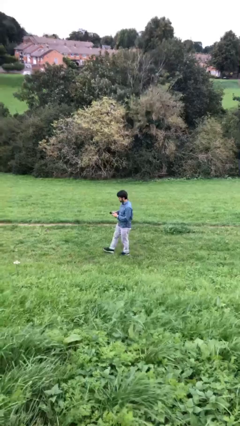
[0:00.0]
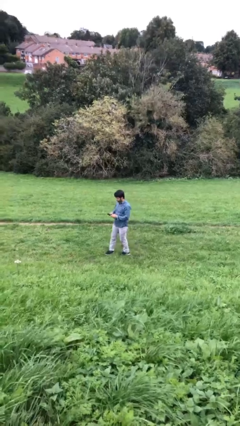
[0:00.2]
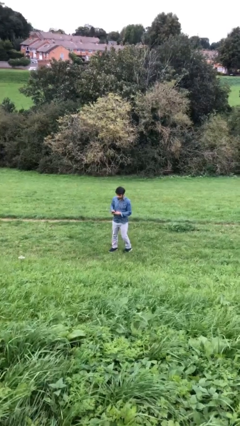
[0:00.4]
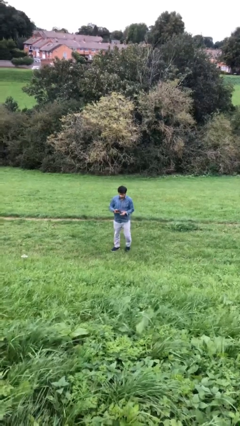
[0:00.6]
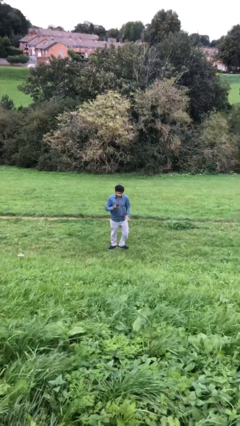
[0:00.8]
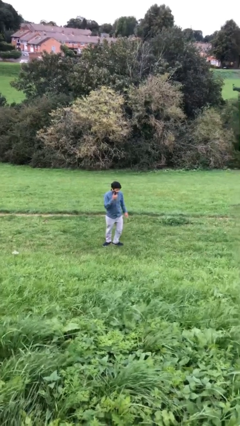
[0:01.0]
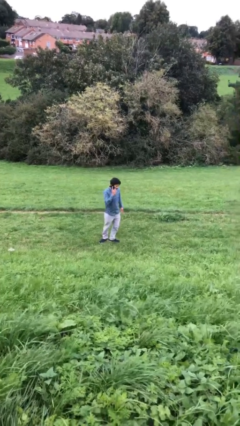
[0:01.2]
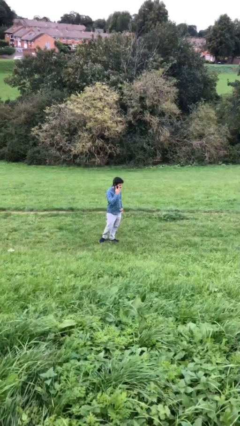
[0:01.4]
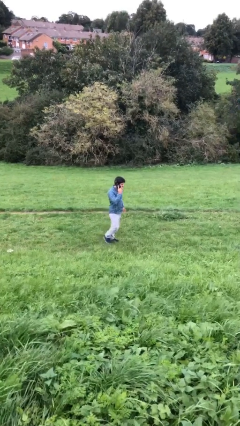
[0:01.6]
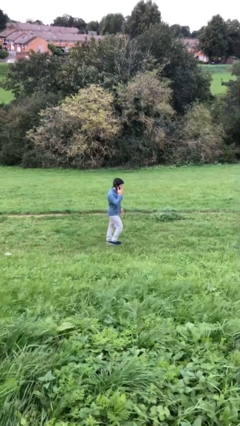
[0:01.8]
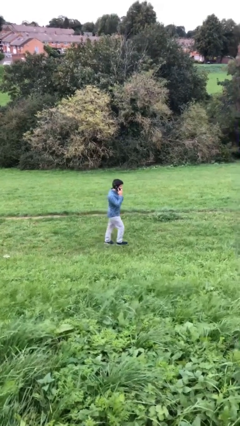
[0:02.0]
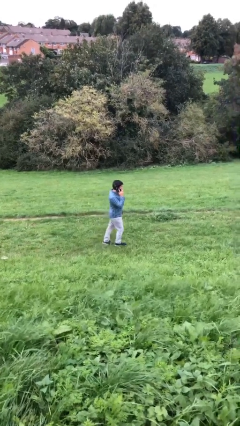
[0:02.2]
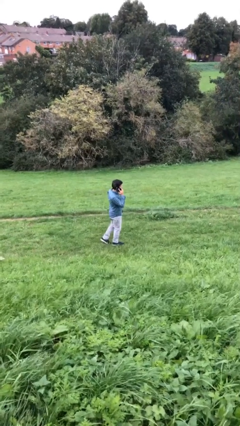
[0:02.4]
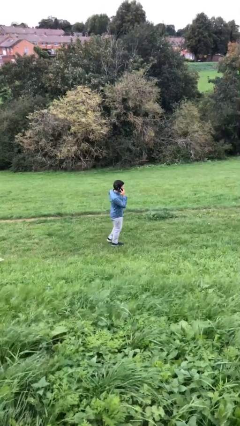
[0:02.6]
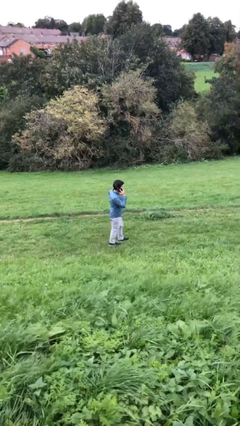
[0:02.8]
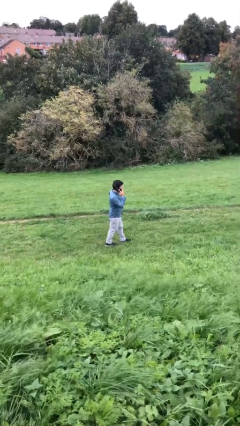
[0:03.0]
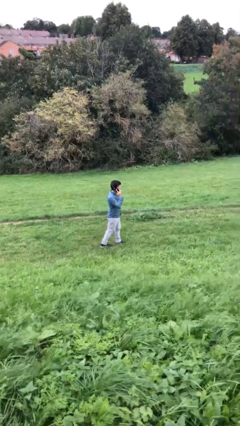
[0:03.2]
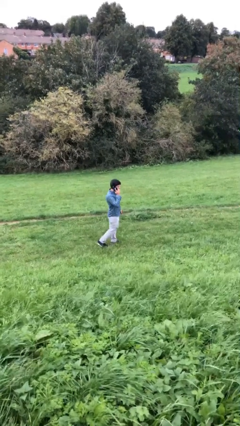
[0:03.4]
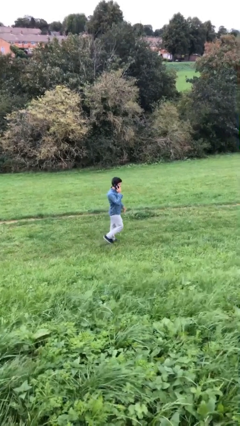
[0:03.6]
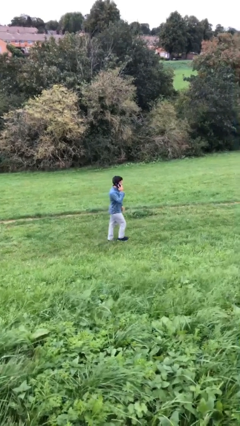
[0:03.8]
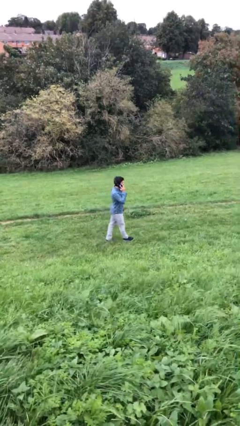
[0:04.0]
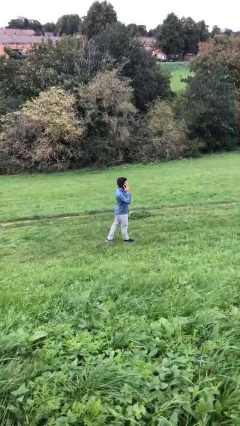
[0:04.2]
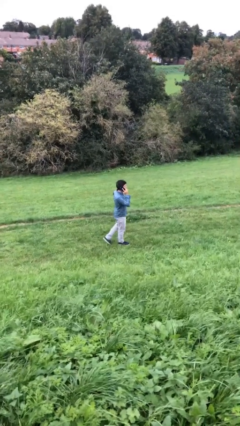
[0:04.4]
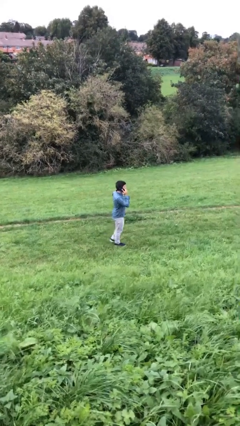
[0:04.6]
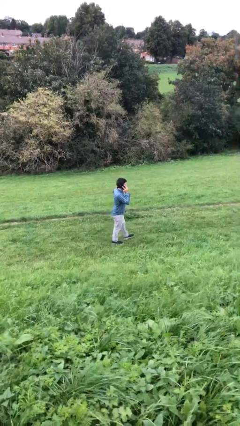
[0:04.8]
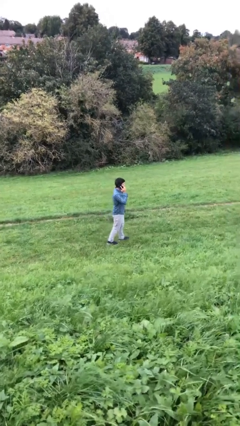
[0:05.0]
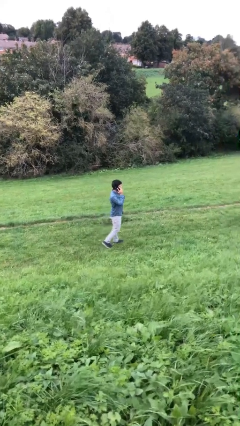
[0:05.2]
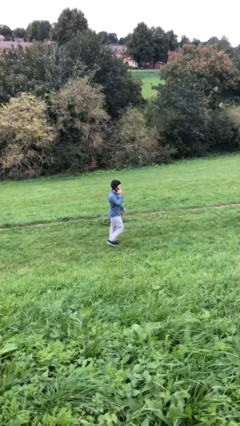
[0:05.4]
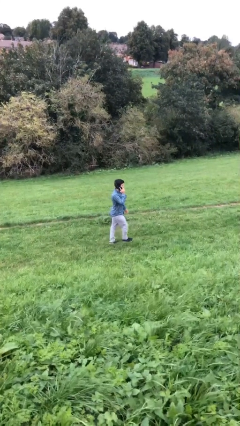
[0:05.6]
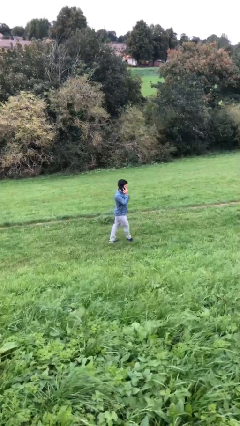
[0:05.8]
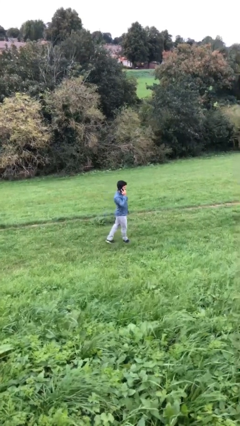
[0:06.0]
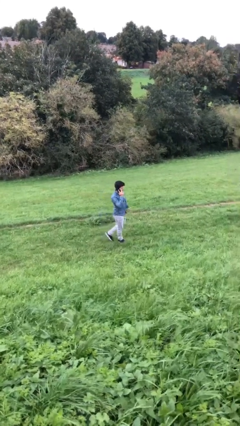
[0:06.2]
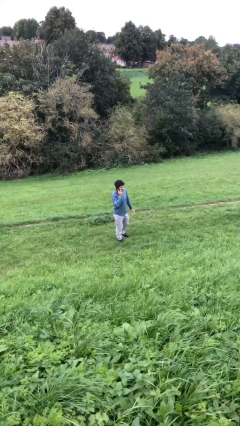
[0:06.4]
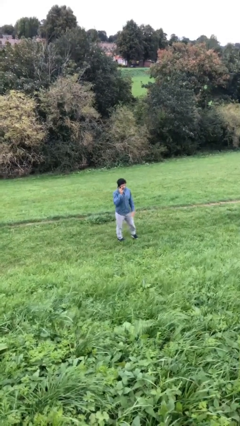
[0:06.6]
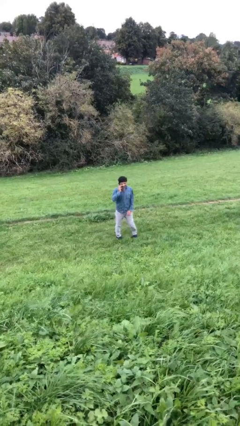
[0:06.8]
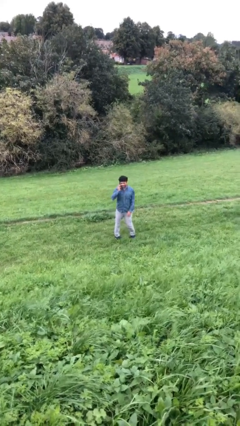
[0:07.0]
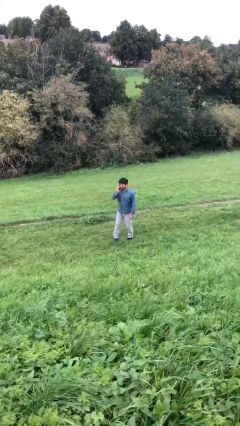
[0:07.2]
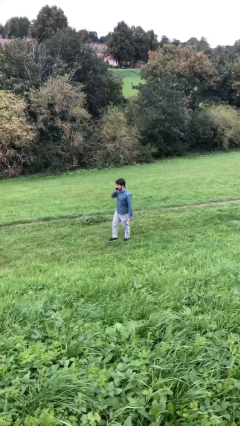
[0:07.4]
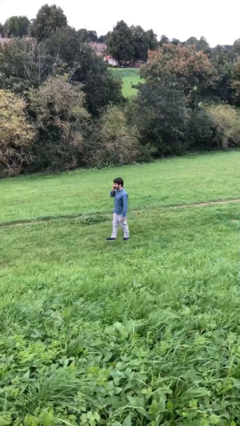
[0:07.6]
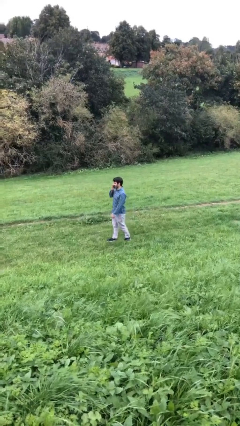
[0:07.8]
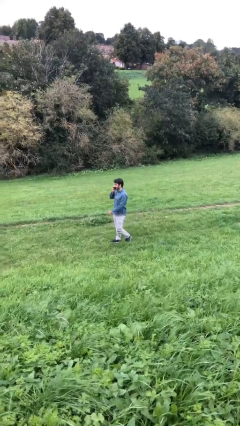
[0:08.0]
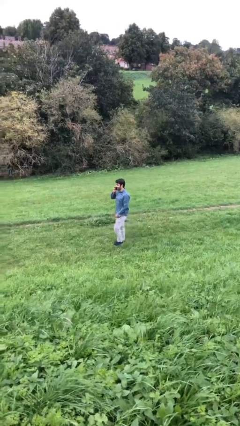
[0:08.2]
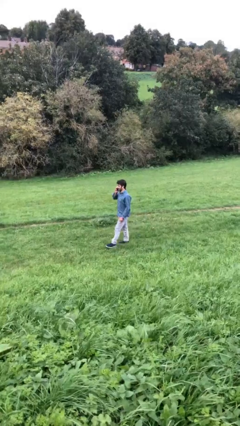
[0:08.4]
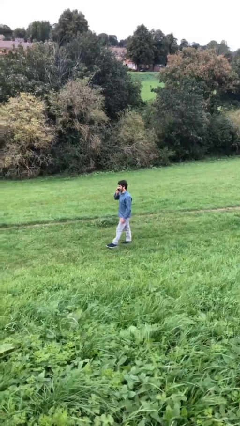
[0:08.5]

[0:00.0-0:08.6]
person talks on phone

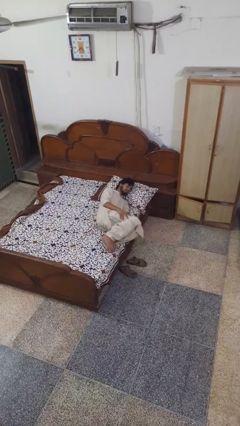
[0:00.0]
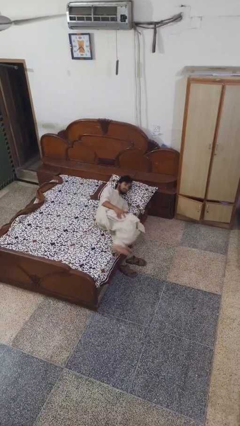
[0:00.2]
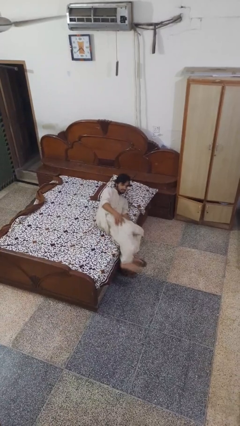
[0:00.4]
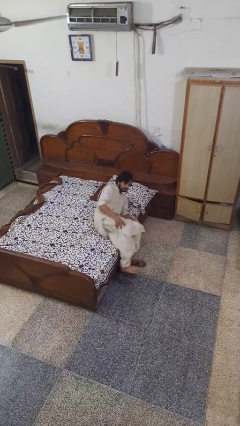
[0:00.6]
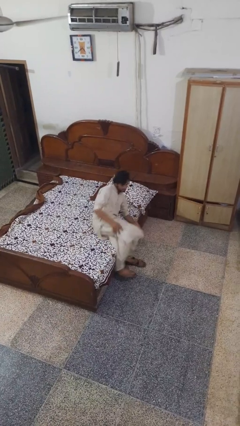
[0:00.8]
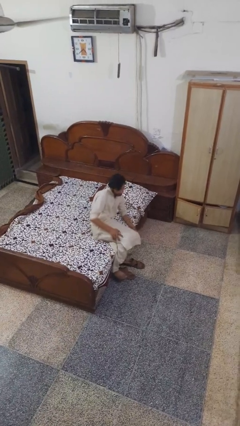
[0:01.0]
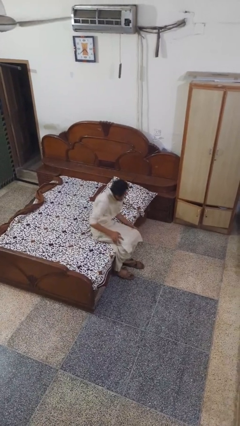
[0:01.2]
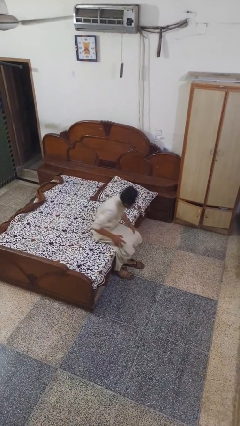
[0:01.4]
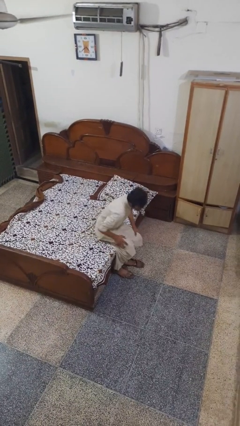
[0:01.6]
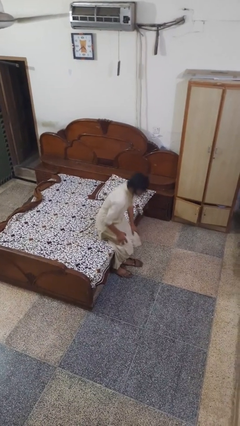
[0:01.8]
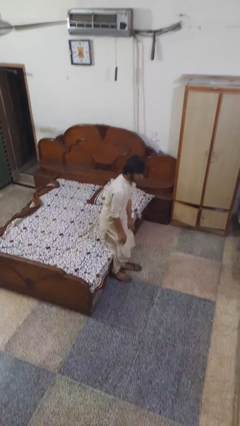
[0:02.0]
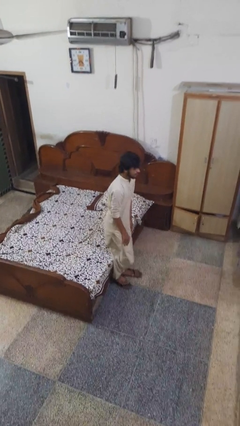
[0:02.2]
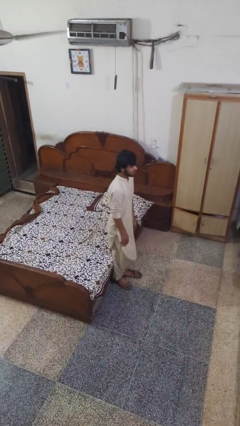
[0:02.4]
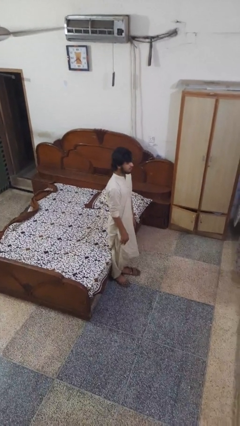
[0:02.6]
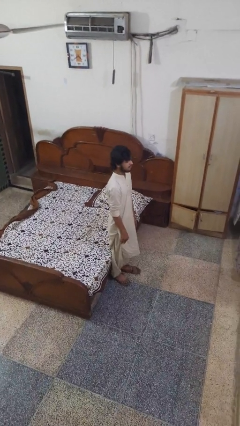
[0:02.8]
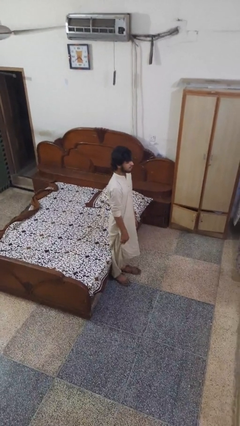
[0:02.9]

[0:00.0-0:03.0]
person stands up

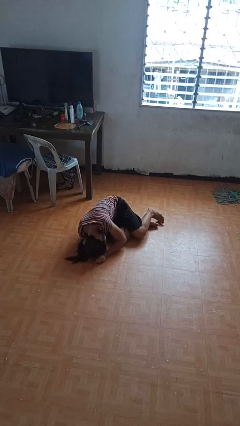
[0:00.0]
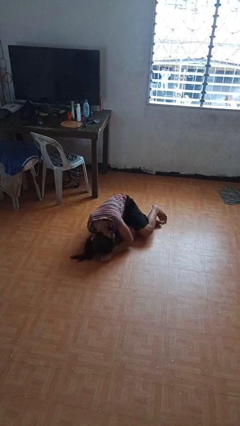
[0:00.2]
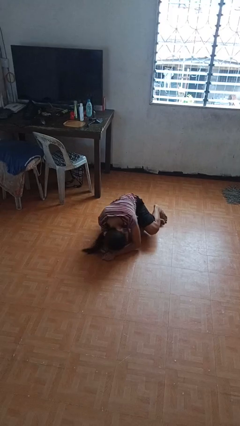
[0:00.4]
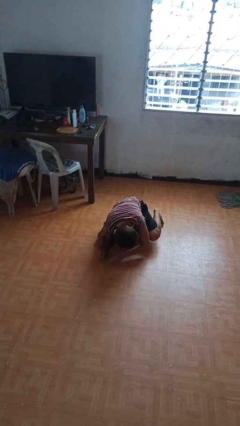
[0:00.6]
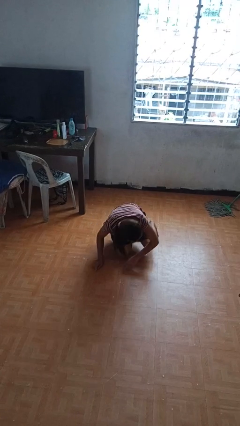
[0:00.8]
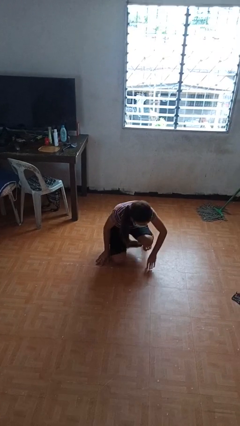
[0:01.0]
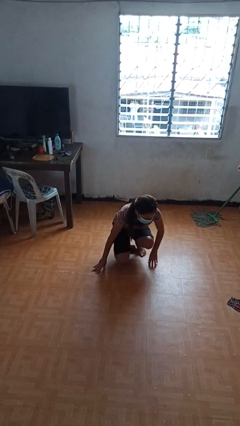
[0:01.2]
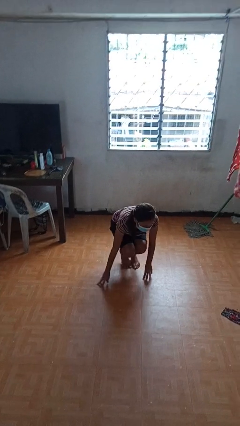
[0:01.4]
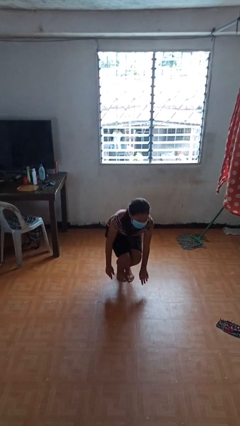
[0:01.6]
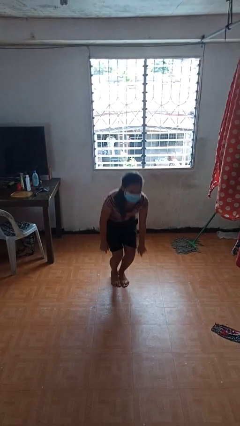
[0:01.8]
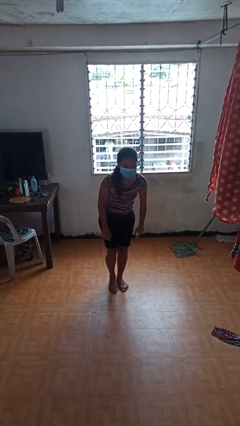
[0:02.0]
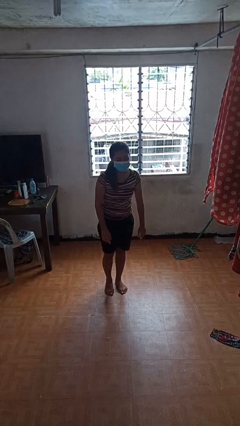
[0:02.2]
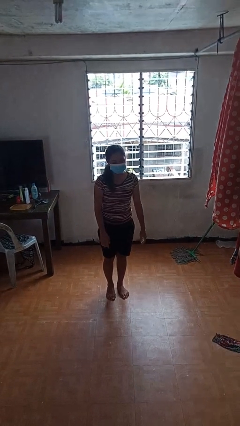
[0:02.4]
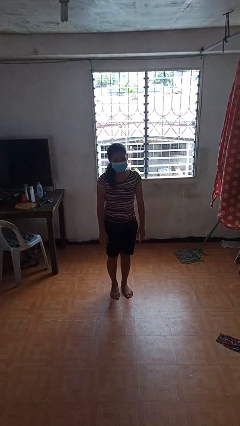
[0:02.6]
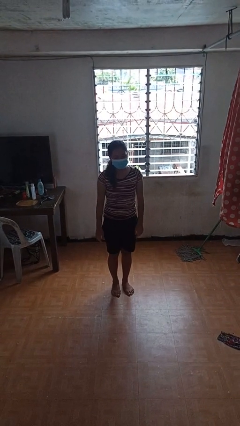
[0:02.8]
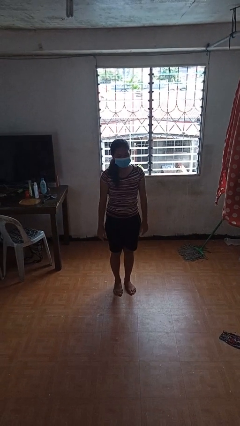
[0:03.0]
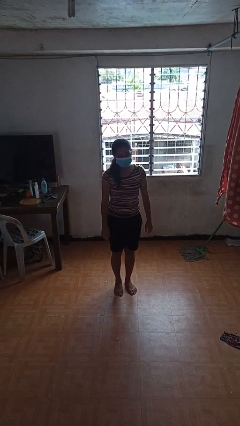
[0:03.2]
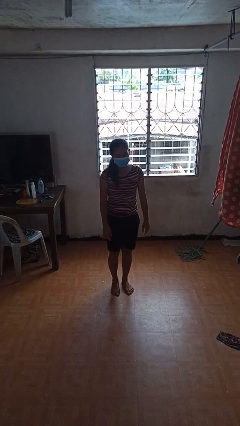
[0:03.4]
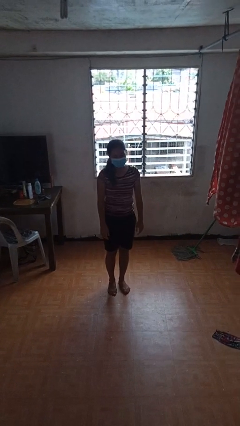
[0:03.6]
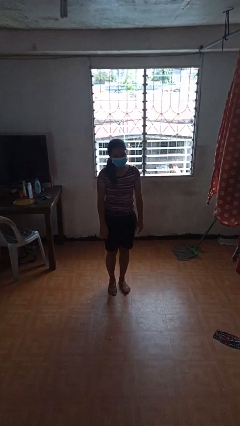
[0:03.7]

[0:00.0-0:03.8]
person stands up from floor

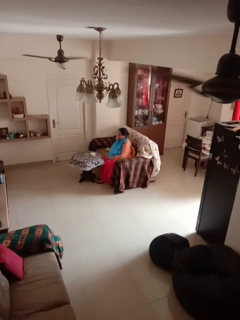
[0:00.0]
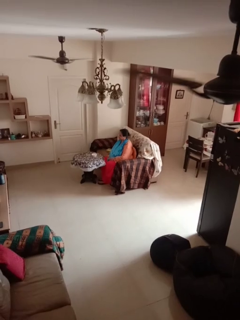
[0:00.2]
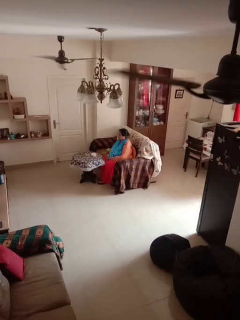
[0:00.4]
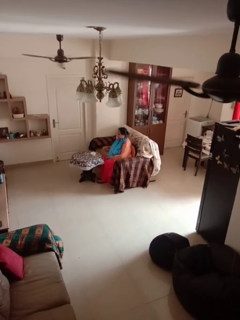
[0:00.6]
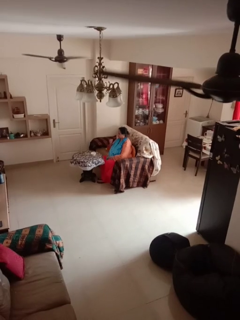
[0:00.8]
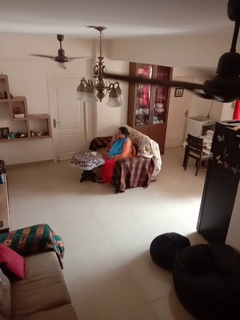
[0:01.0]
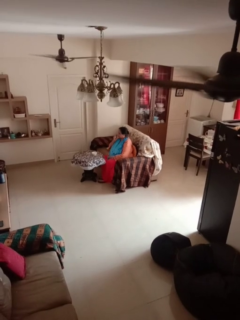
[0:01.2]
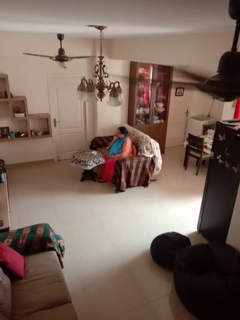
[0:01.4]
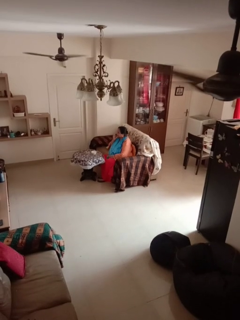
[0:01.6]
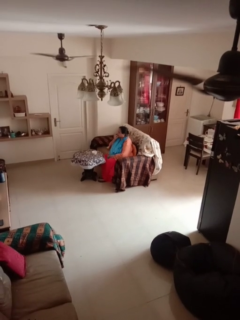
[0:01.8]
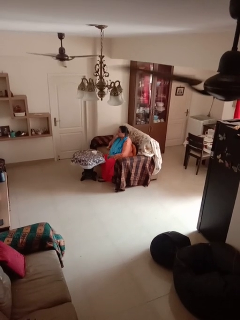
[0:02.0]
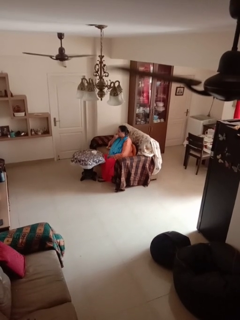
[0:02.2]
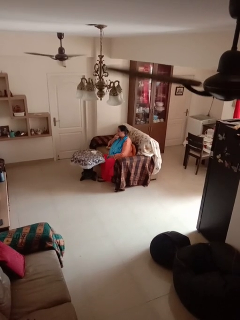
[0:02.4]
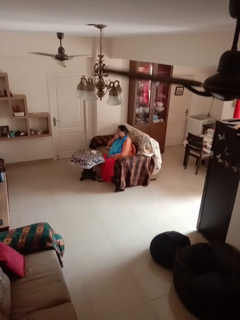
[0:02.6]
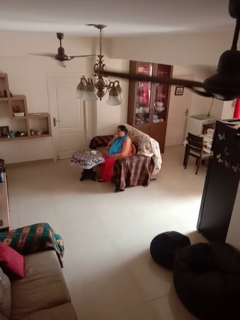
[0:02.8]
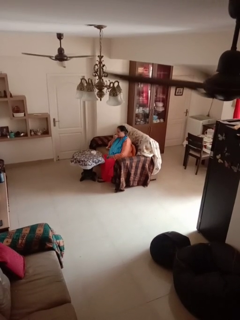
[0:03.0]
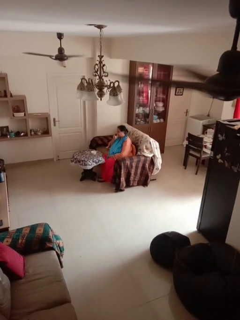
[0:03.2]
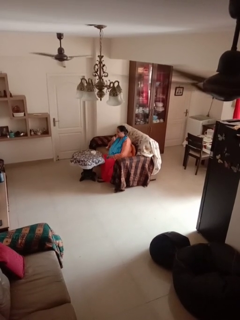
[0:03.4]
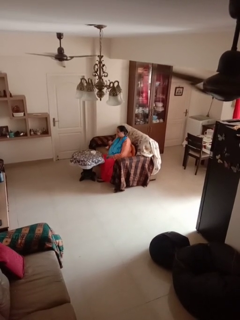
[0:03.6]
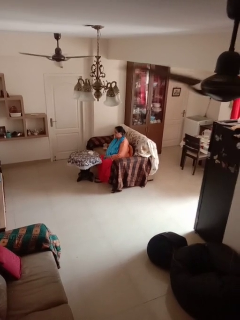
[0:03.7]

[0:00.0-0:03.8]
person licks fingers
